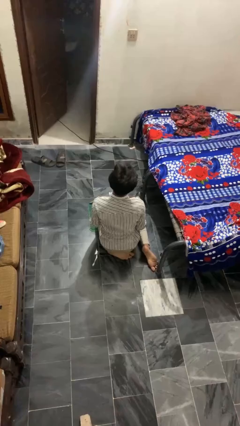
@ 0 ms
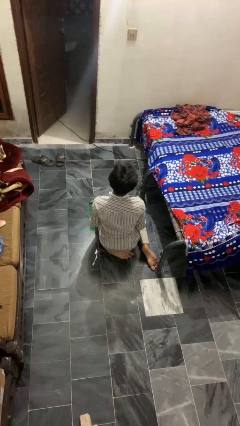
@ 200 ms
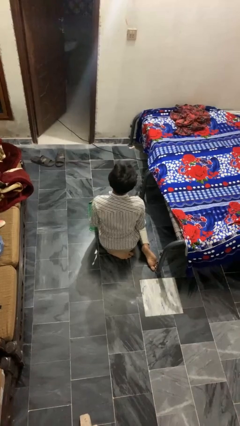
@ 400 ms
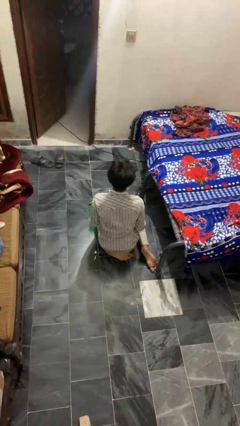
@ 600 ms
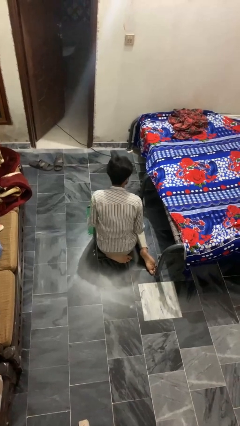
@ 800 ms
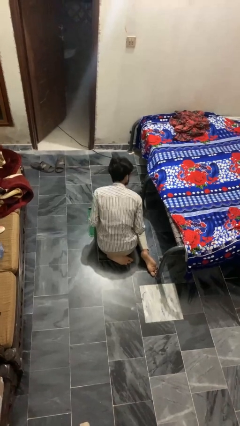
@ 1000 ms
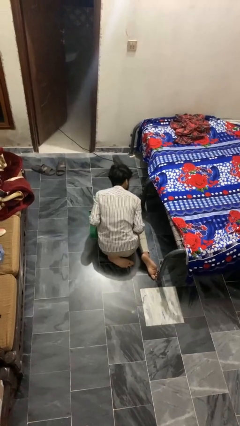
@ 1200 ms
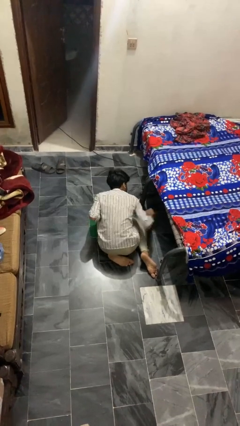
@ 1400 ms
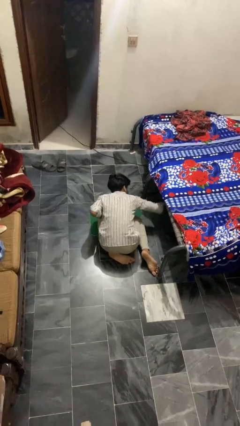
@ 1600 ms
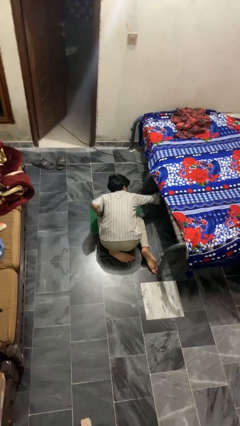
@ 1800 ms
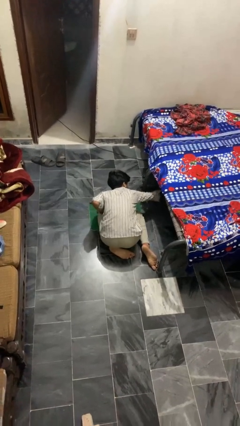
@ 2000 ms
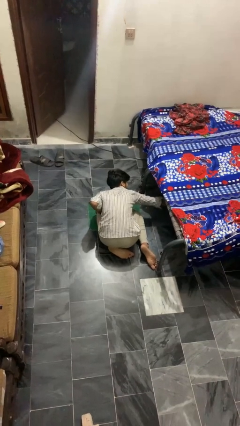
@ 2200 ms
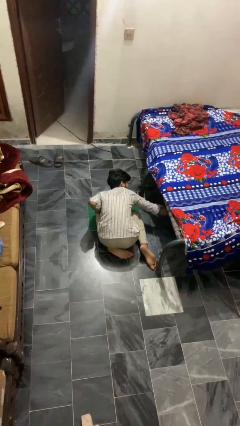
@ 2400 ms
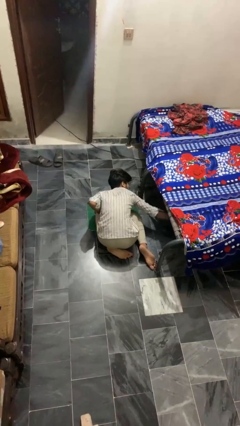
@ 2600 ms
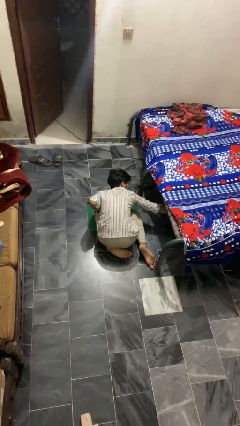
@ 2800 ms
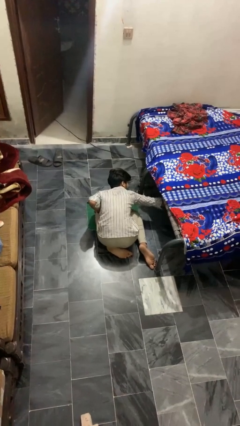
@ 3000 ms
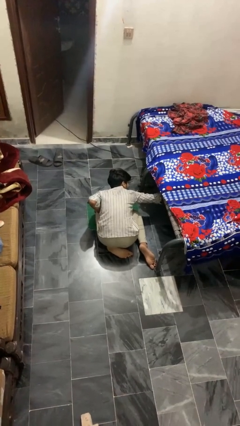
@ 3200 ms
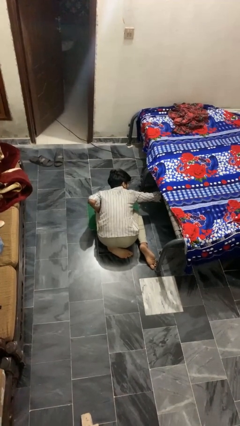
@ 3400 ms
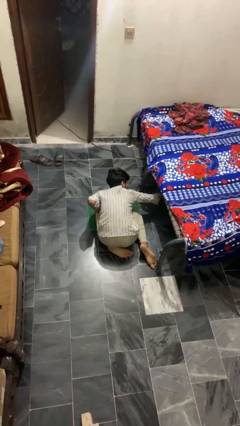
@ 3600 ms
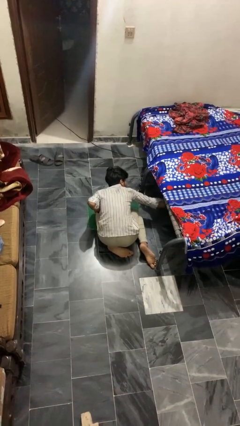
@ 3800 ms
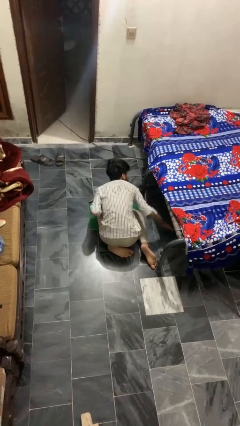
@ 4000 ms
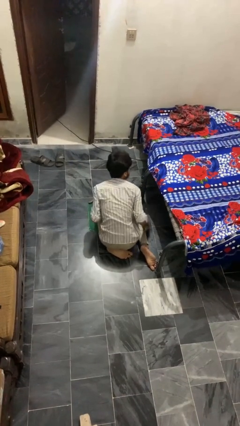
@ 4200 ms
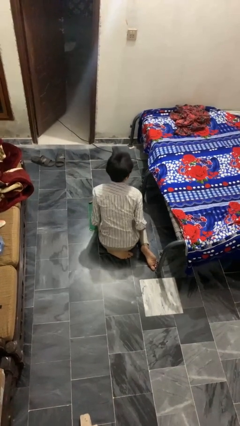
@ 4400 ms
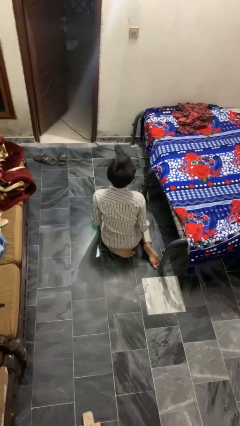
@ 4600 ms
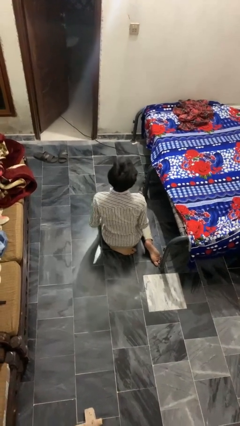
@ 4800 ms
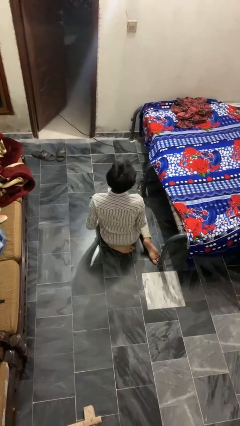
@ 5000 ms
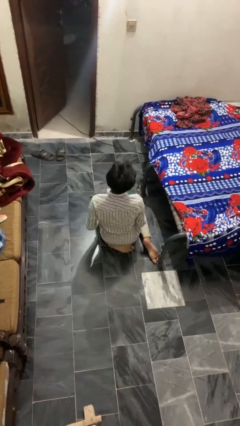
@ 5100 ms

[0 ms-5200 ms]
person searches under bed

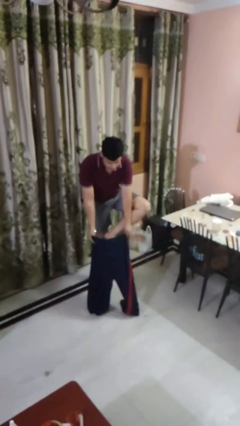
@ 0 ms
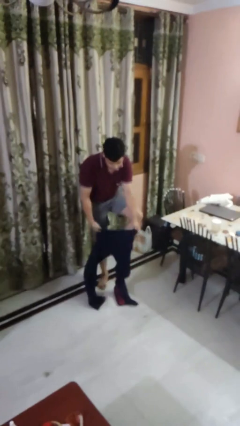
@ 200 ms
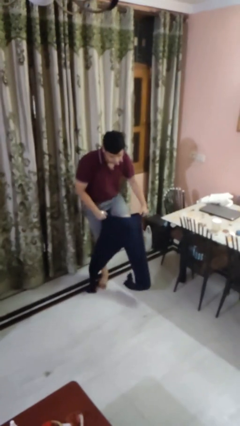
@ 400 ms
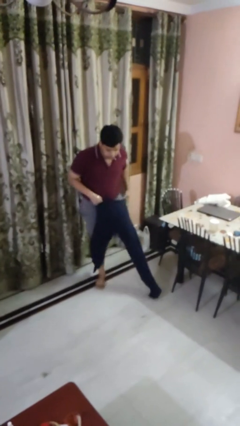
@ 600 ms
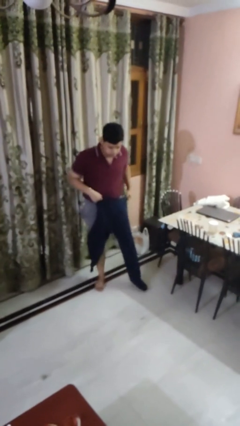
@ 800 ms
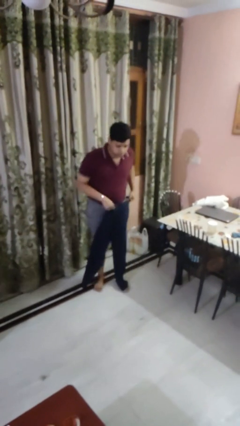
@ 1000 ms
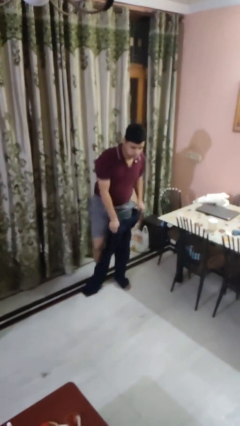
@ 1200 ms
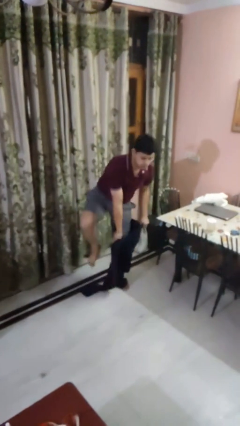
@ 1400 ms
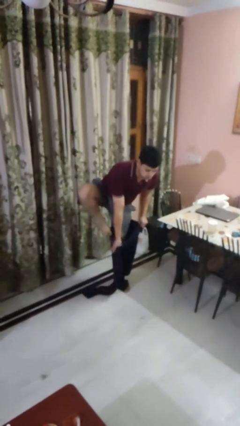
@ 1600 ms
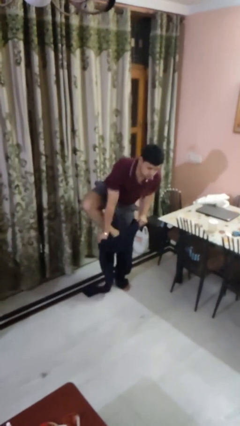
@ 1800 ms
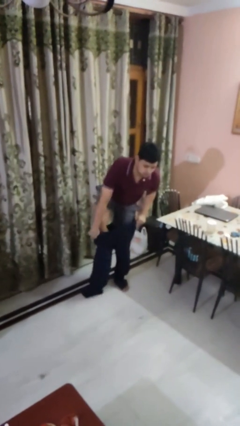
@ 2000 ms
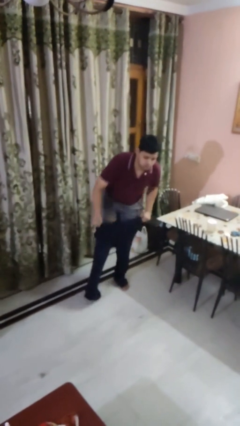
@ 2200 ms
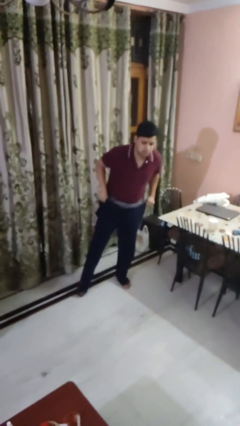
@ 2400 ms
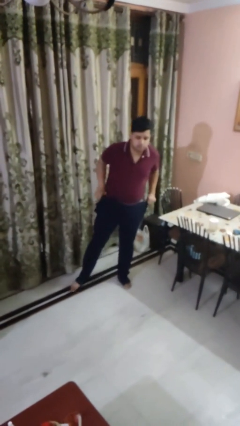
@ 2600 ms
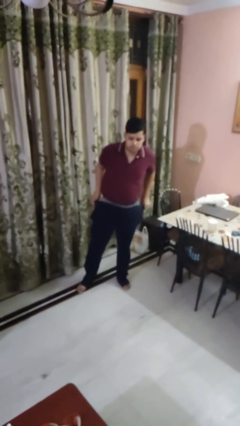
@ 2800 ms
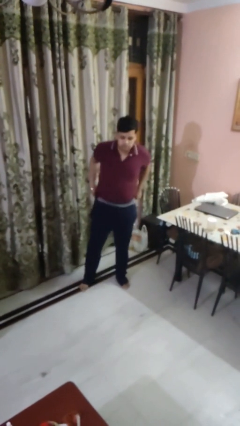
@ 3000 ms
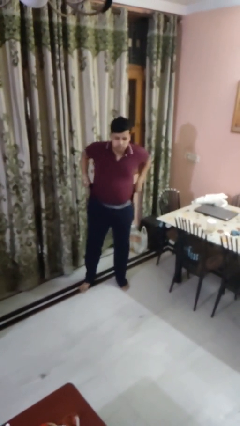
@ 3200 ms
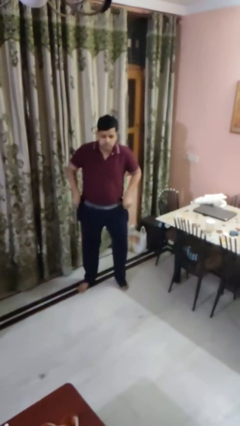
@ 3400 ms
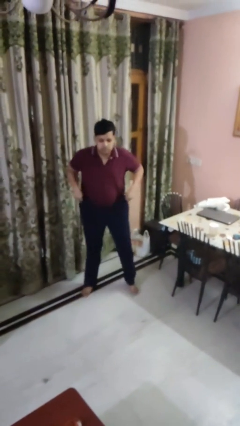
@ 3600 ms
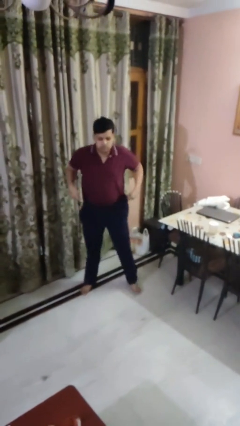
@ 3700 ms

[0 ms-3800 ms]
person puts on pants

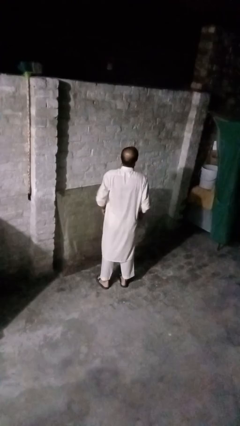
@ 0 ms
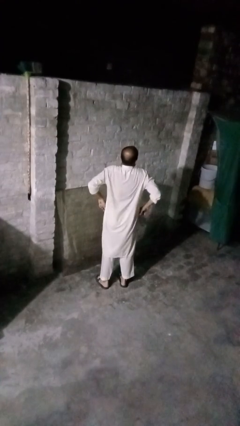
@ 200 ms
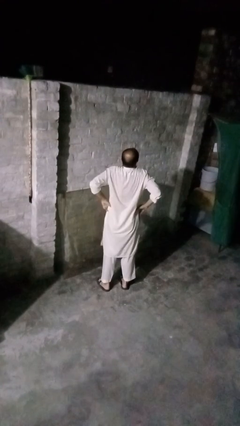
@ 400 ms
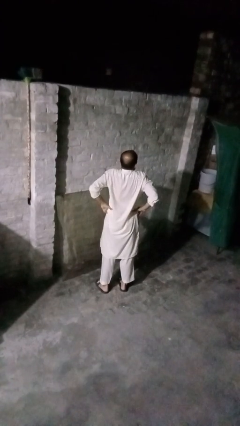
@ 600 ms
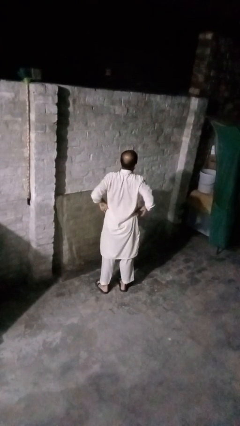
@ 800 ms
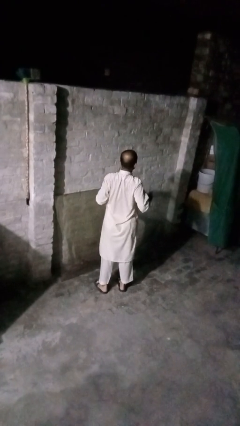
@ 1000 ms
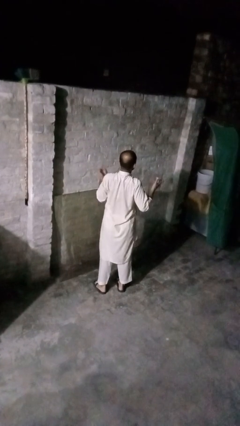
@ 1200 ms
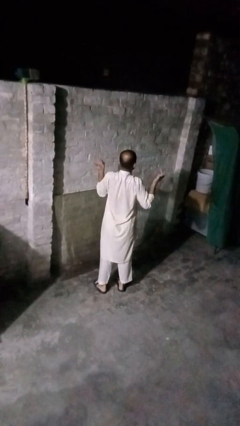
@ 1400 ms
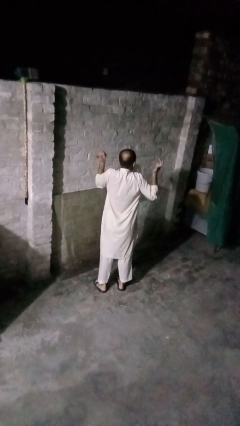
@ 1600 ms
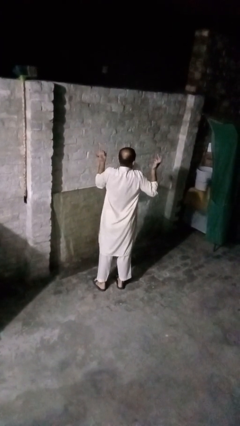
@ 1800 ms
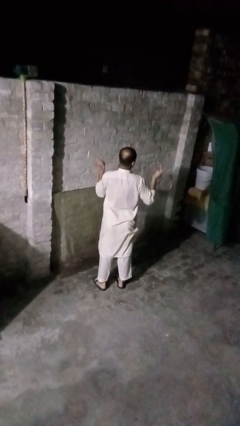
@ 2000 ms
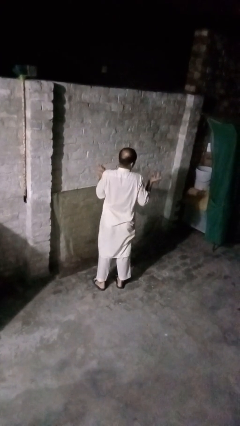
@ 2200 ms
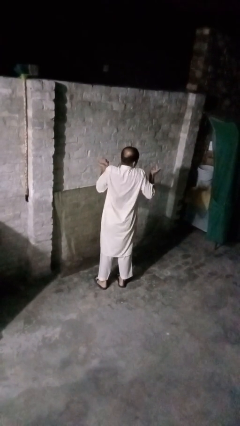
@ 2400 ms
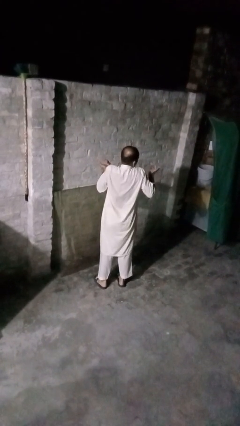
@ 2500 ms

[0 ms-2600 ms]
person shrugs

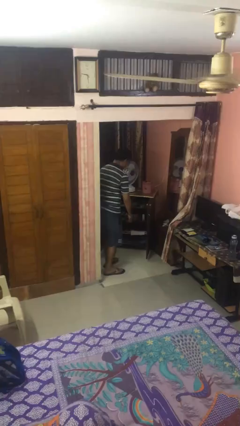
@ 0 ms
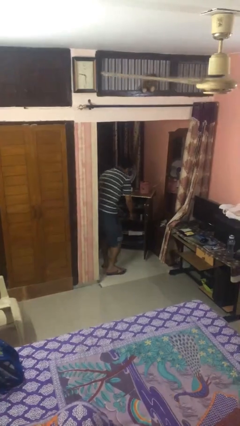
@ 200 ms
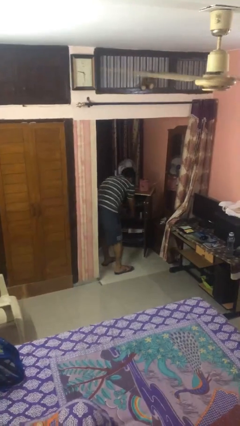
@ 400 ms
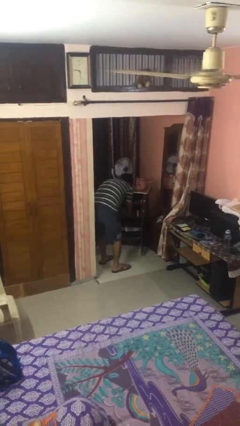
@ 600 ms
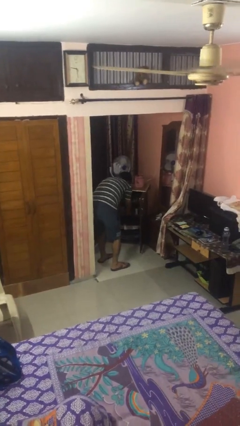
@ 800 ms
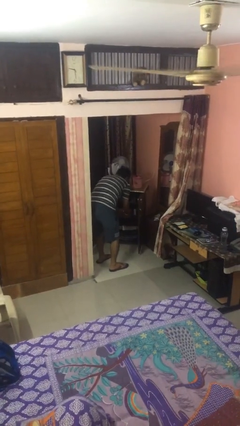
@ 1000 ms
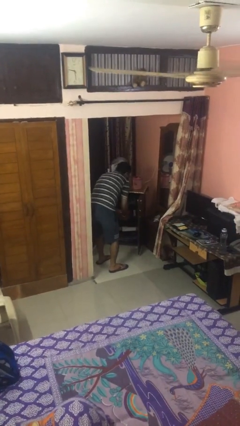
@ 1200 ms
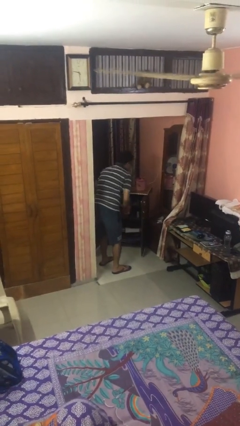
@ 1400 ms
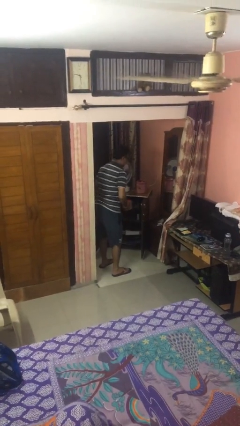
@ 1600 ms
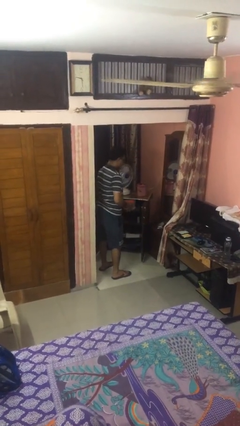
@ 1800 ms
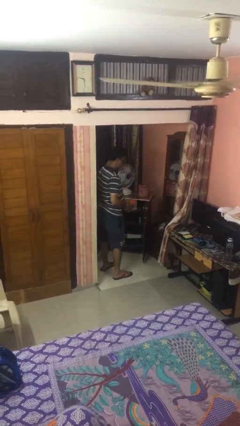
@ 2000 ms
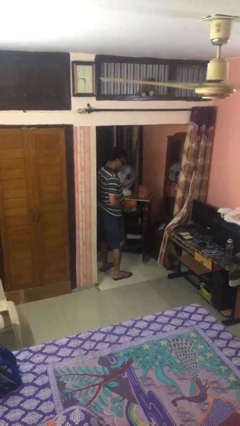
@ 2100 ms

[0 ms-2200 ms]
person picks up object from cabinet

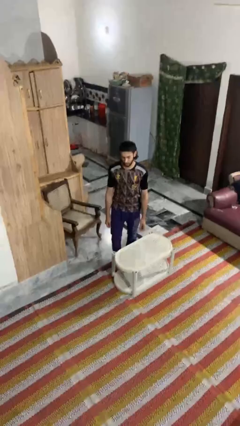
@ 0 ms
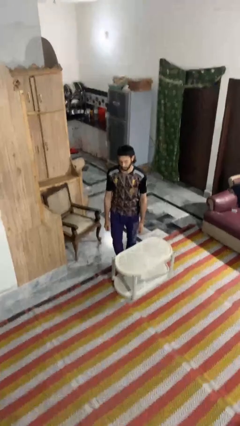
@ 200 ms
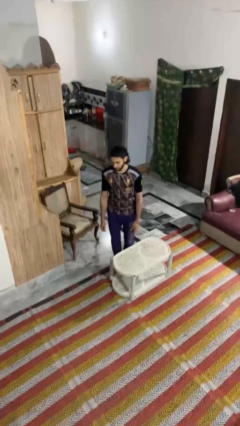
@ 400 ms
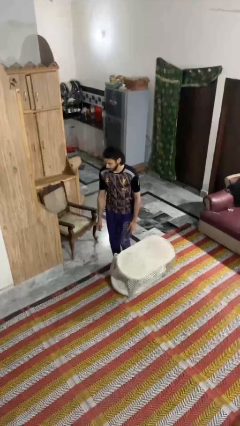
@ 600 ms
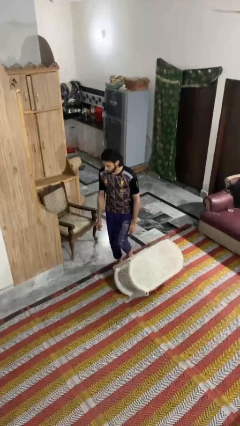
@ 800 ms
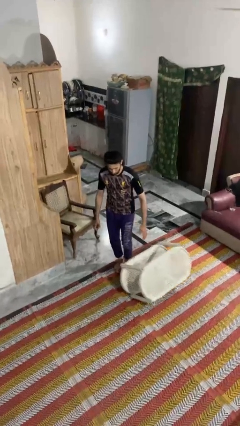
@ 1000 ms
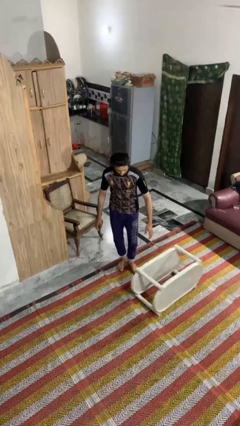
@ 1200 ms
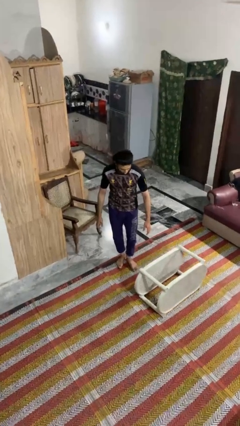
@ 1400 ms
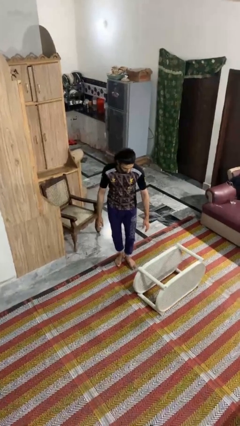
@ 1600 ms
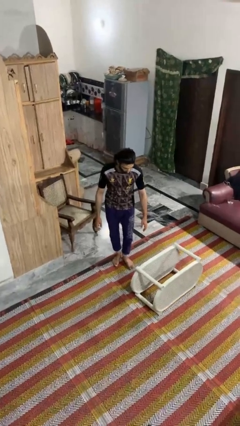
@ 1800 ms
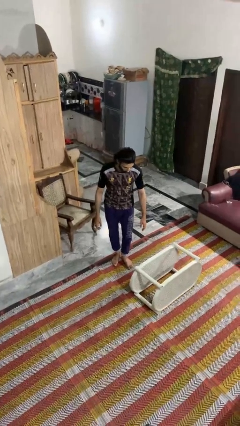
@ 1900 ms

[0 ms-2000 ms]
person knocks over furniture

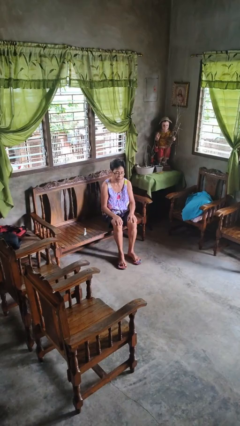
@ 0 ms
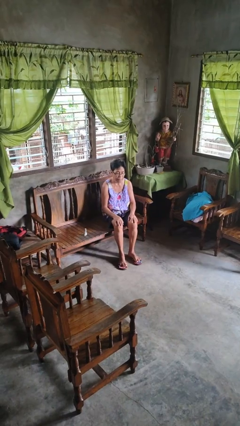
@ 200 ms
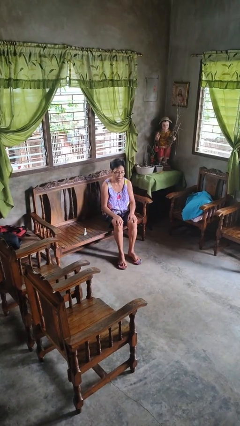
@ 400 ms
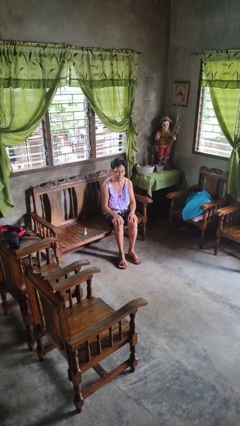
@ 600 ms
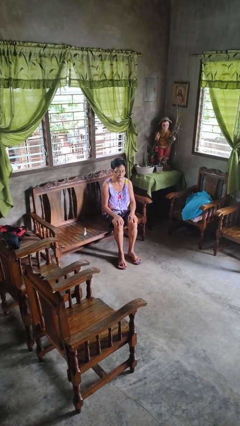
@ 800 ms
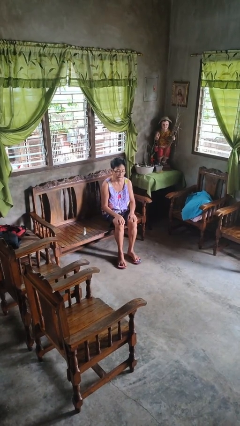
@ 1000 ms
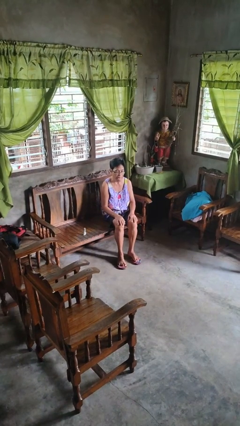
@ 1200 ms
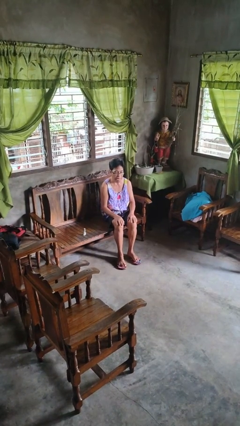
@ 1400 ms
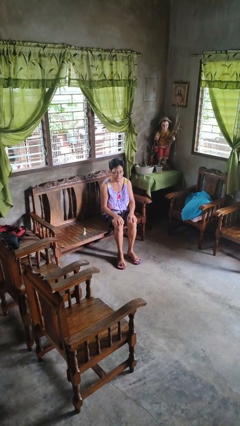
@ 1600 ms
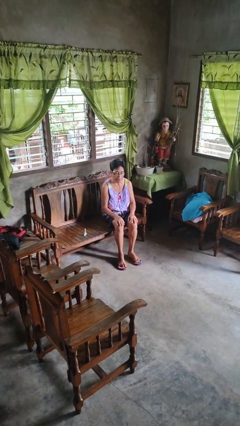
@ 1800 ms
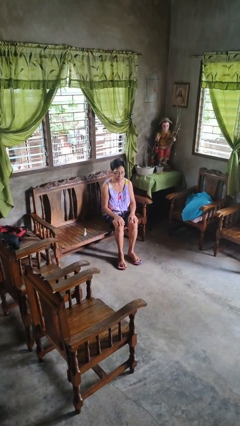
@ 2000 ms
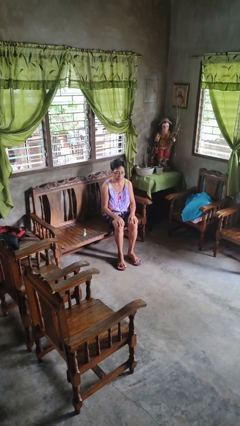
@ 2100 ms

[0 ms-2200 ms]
person sticks out tongue
